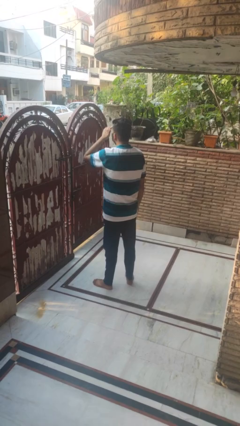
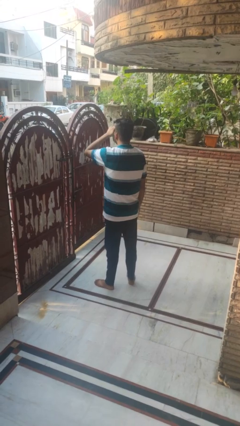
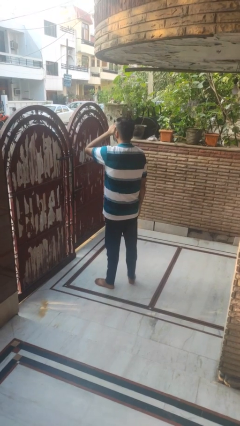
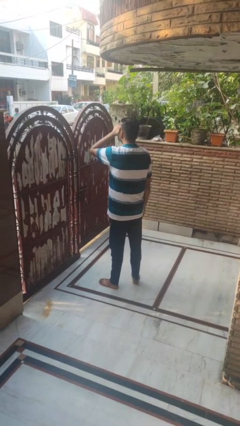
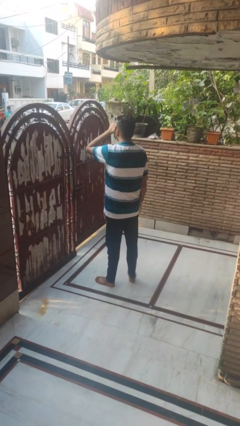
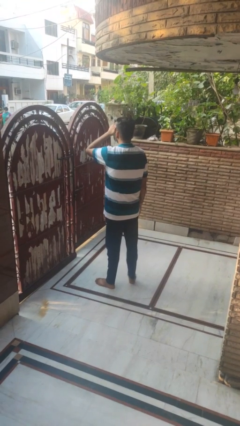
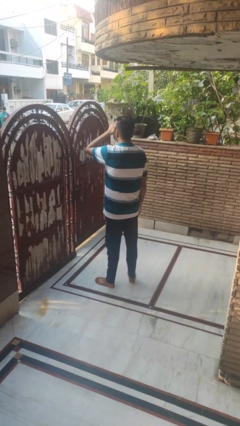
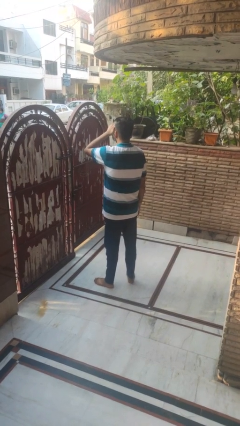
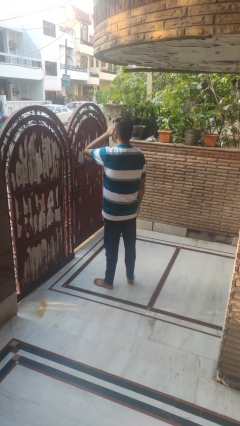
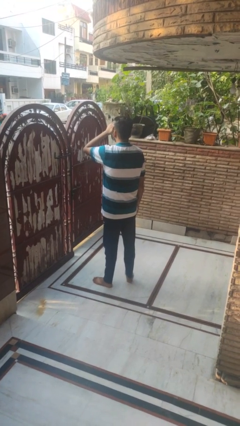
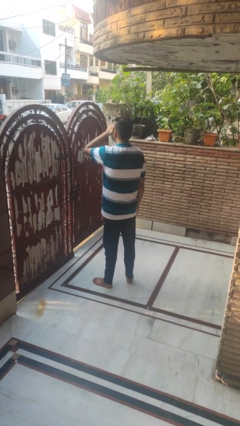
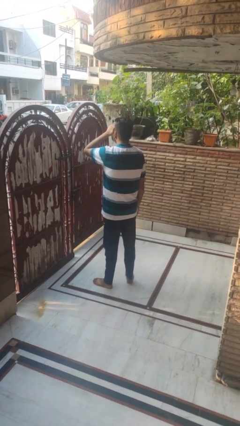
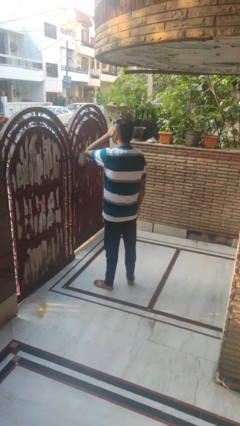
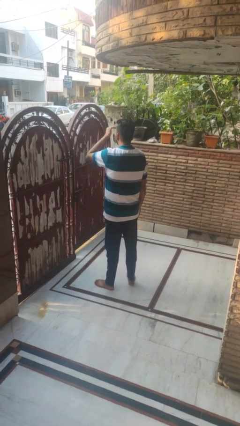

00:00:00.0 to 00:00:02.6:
person shades eyes

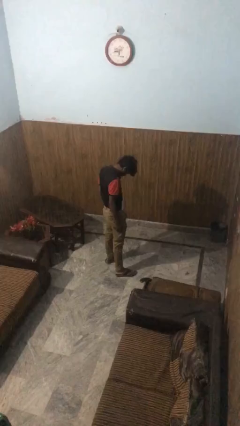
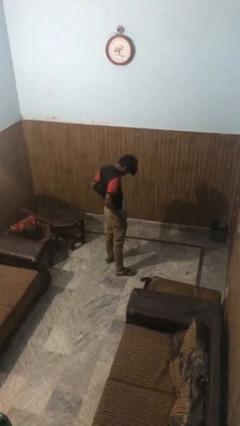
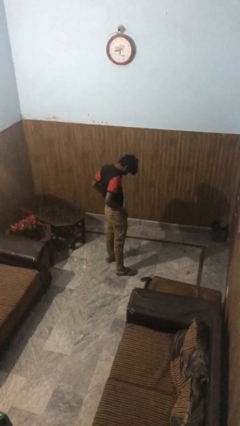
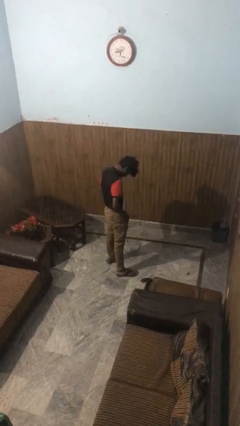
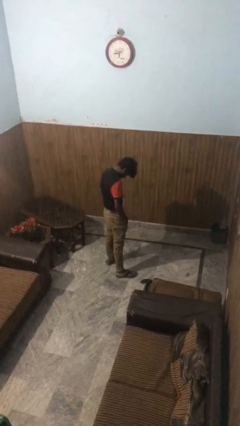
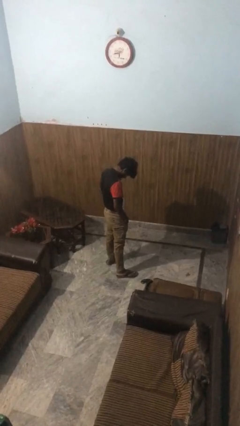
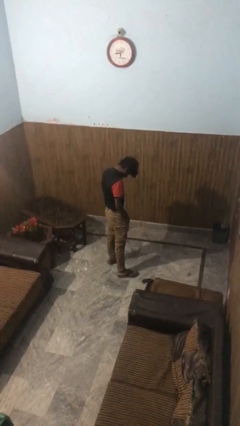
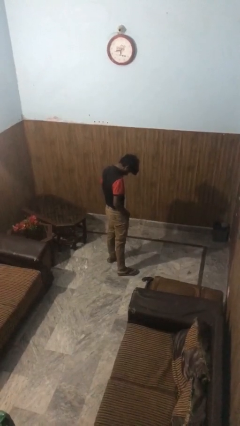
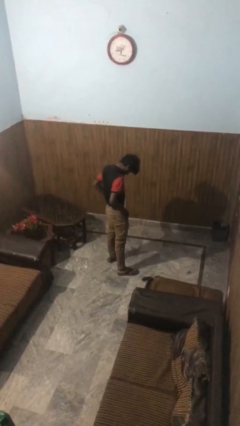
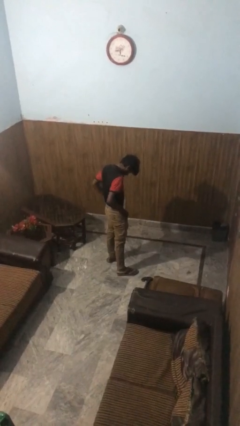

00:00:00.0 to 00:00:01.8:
person puts hands in back pockets

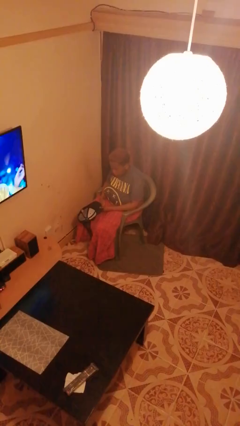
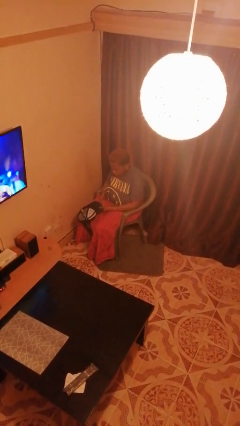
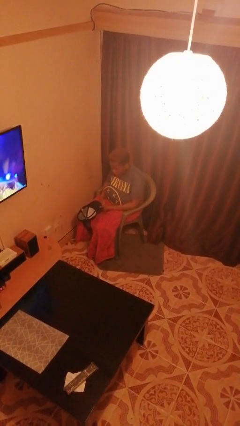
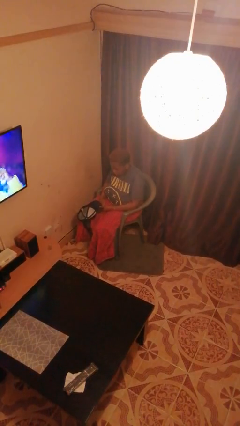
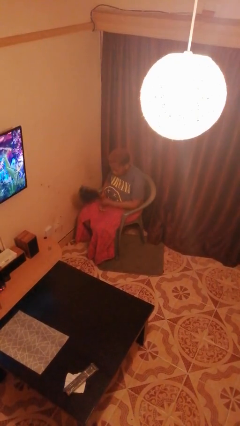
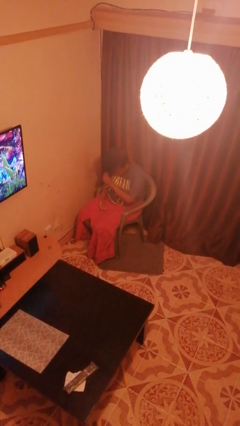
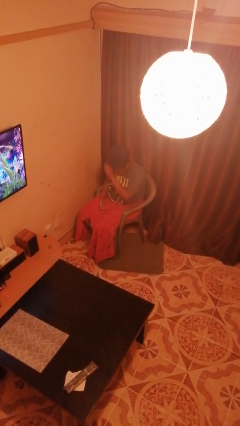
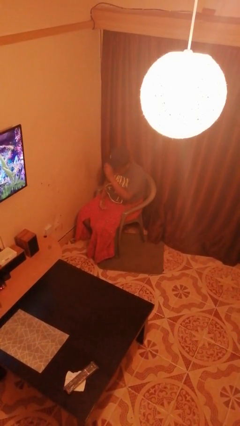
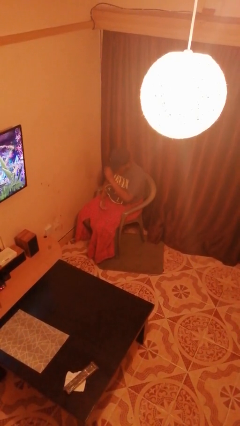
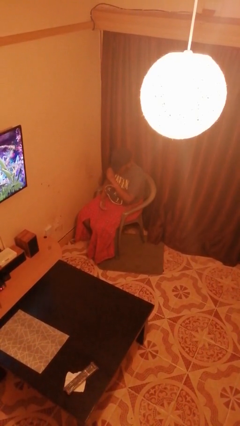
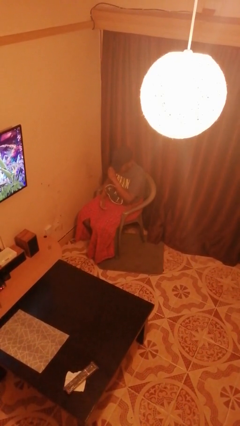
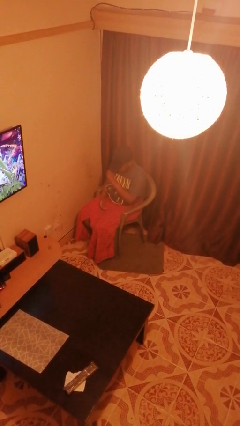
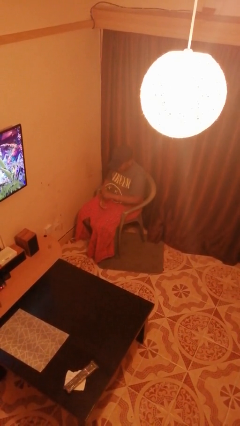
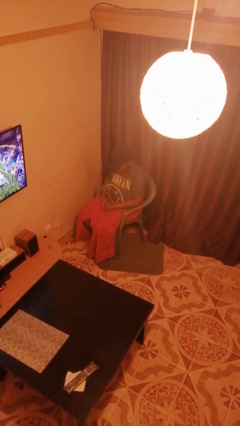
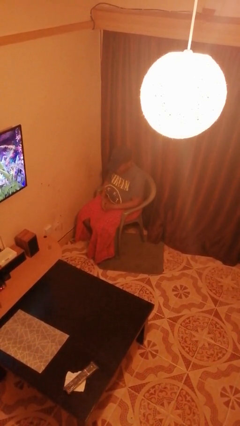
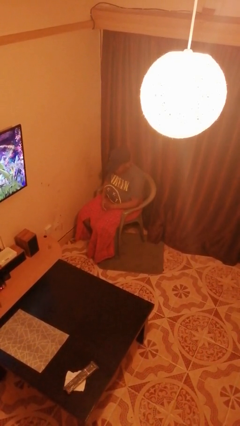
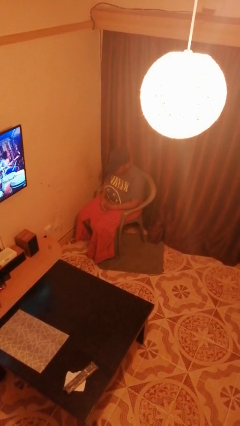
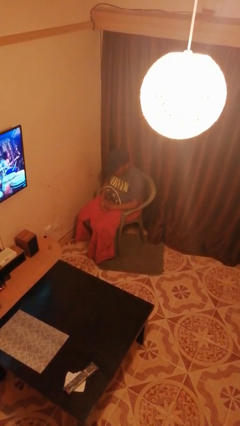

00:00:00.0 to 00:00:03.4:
person puts on hat

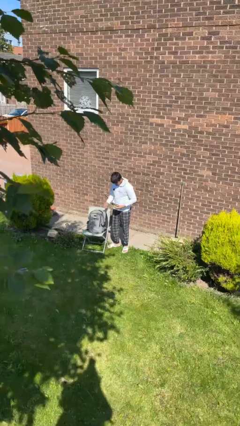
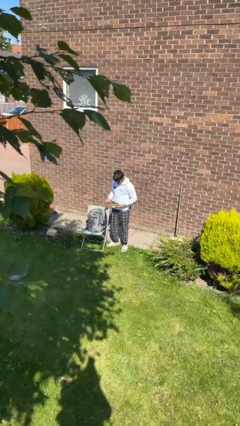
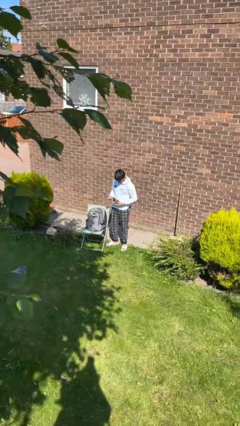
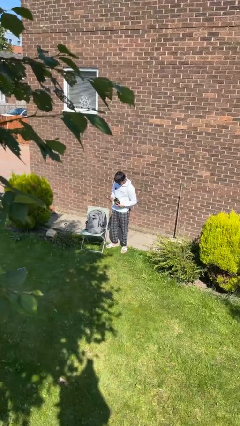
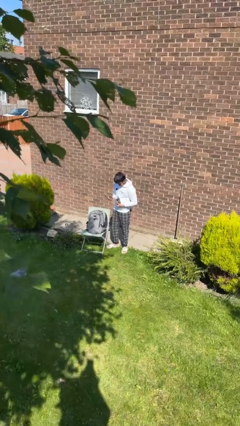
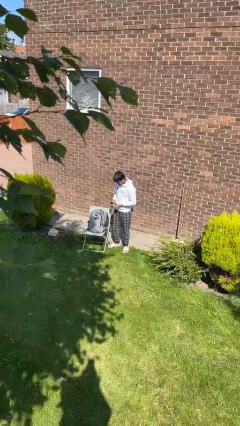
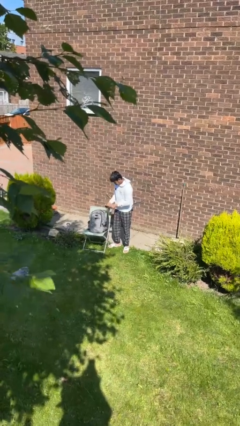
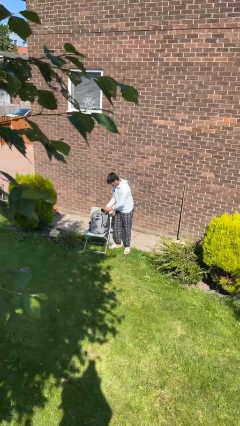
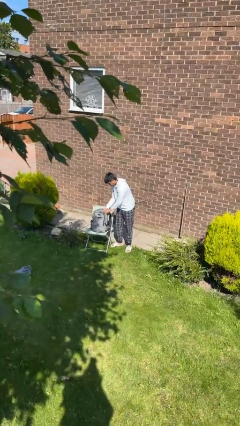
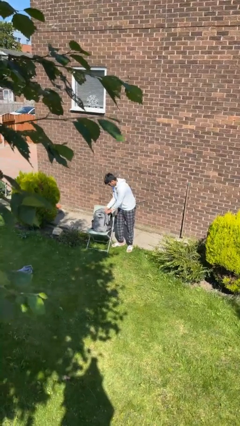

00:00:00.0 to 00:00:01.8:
person puts object into backpack

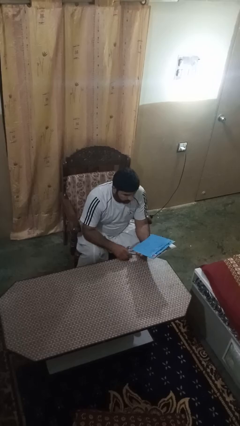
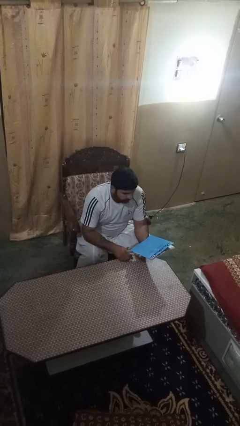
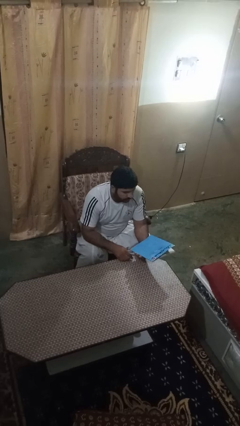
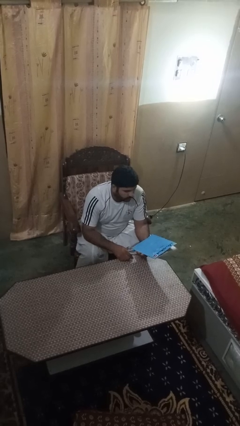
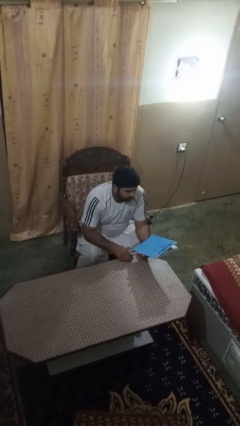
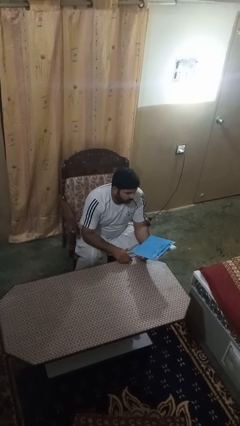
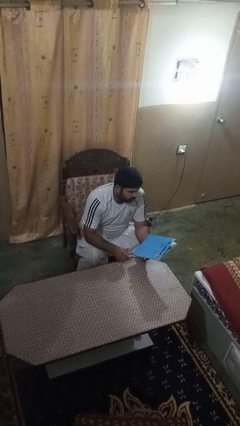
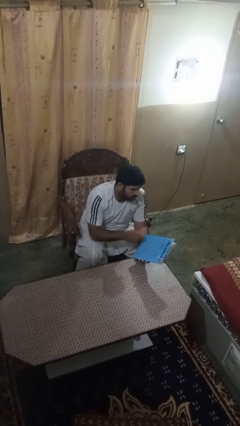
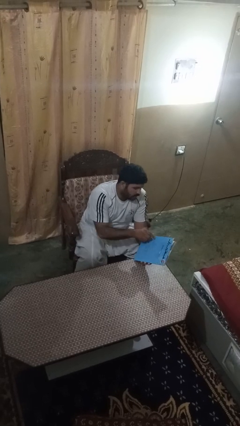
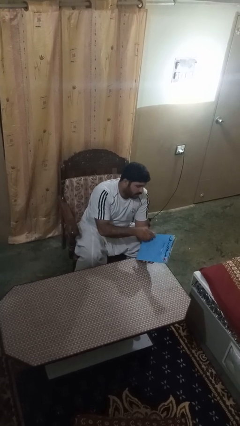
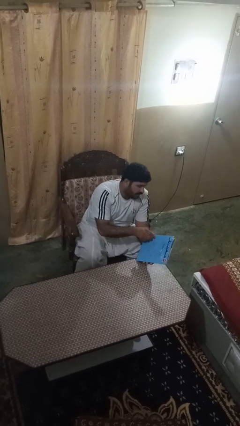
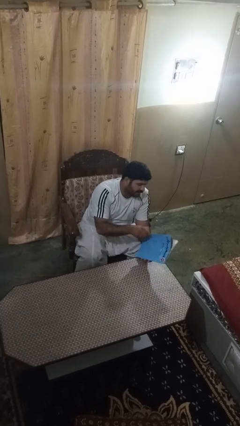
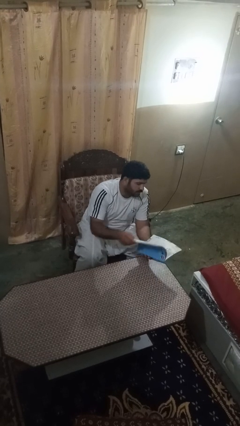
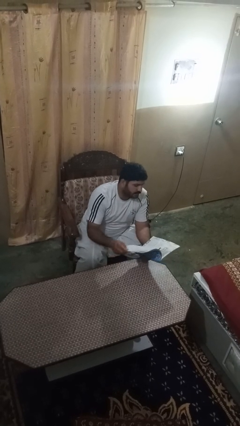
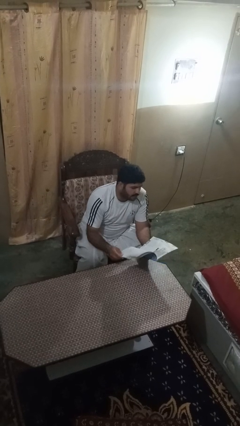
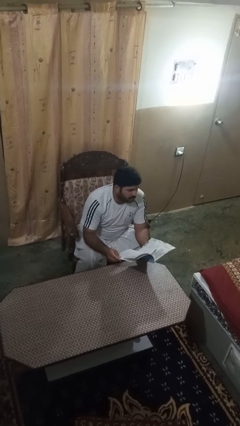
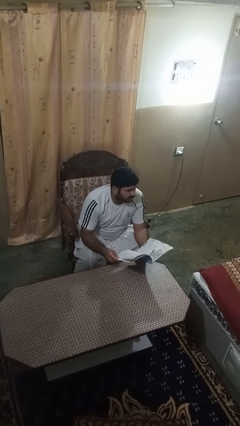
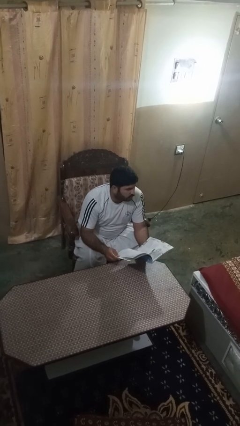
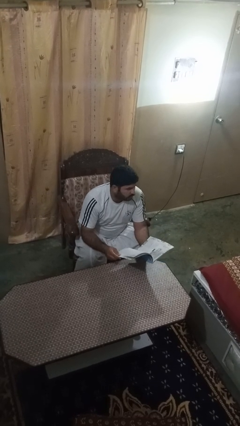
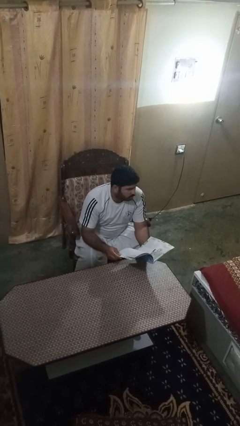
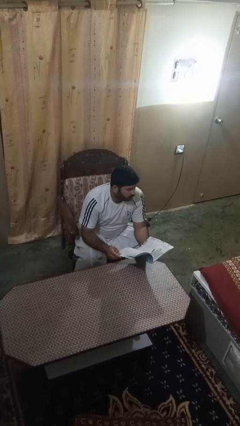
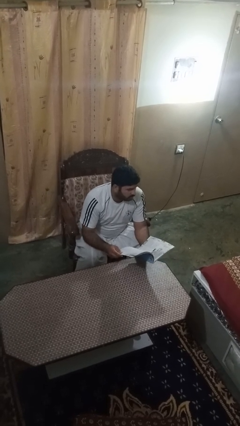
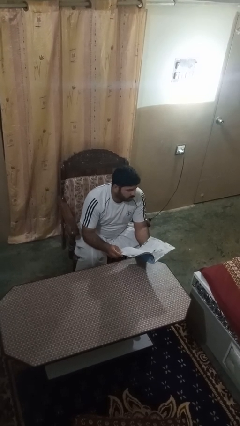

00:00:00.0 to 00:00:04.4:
person reads magazine

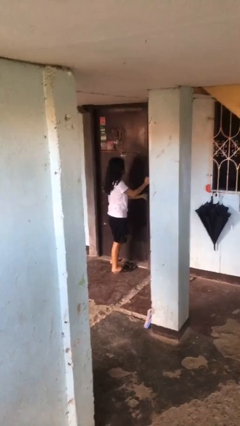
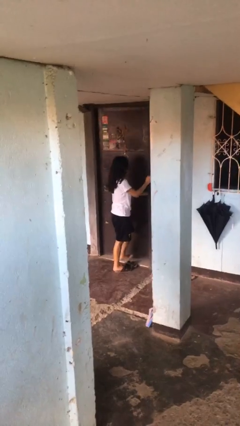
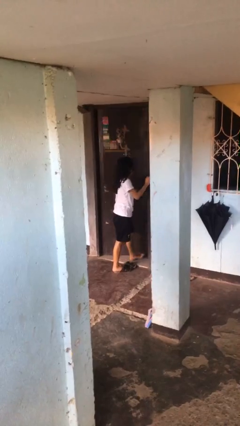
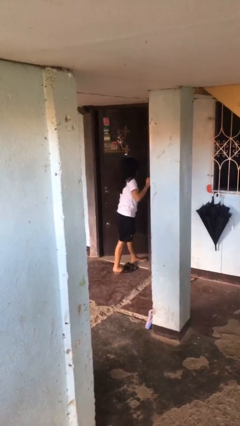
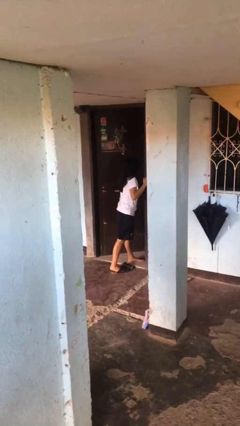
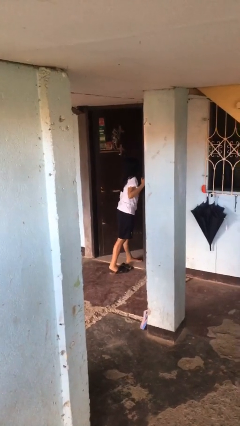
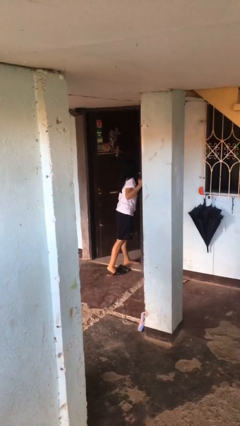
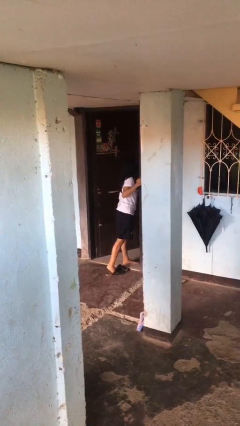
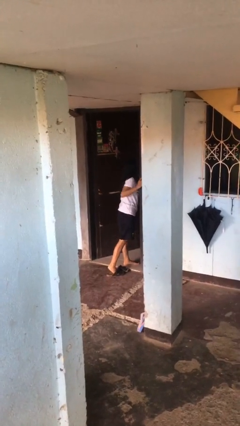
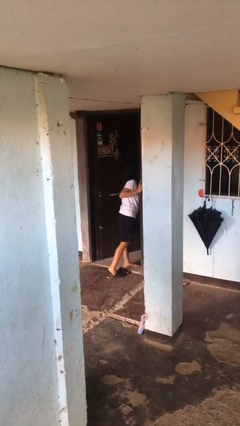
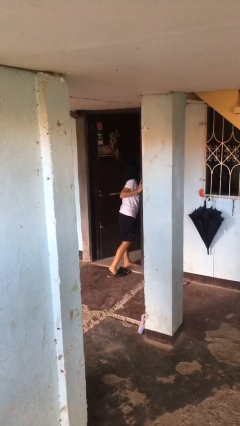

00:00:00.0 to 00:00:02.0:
person opens facility door

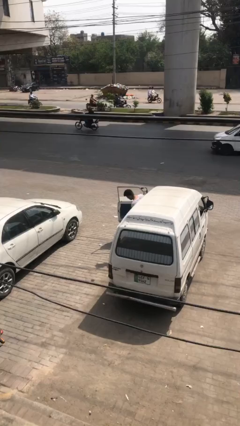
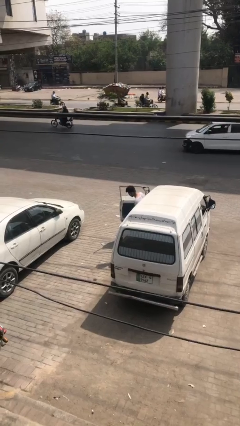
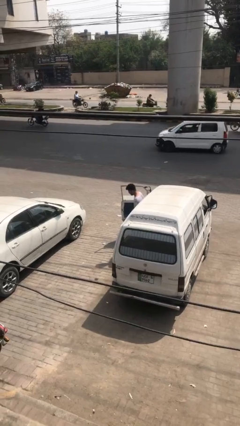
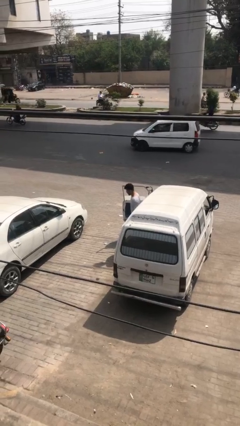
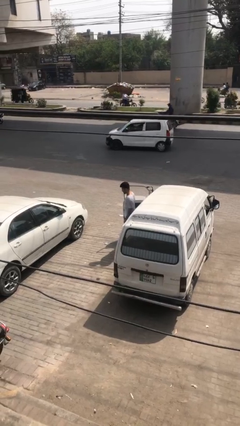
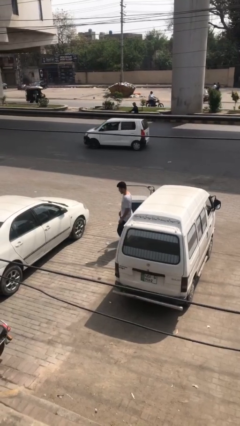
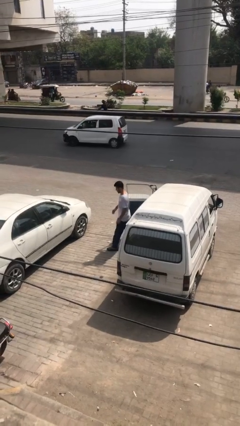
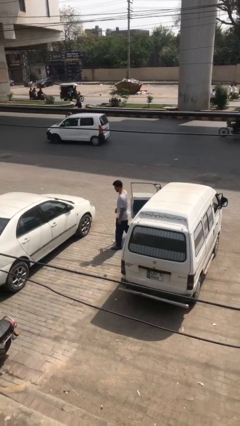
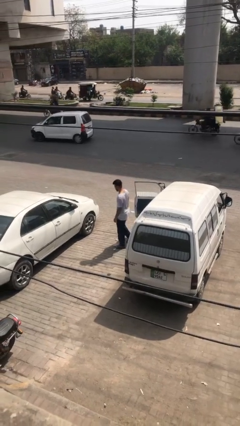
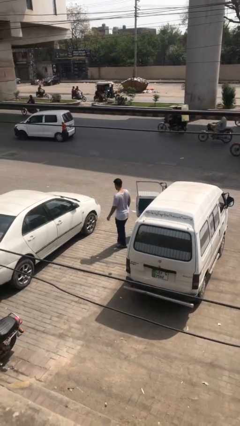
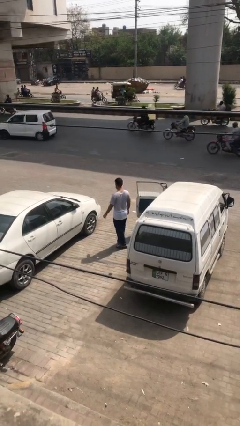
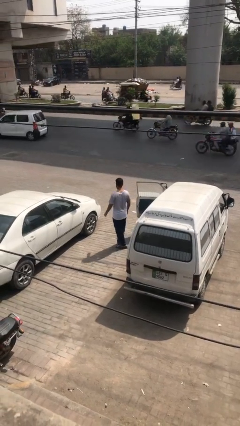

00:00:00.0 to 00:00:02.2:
person exits car
